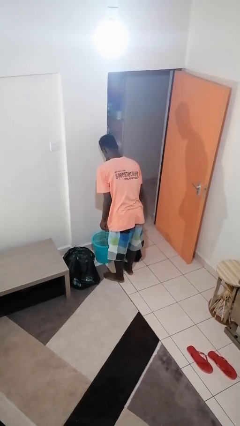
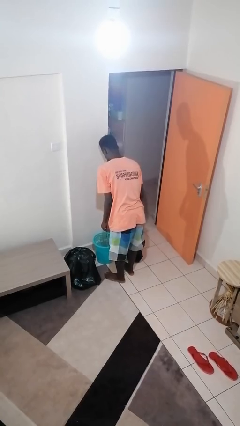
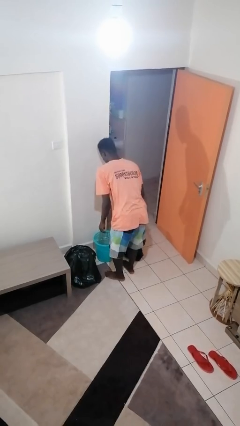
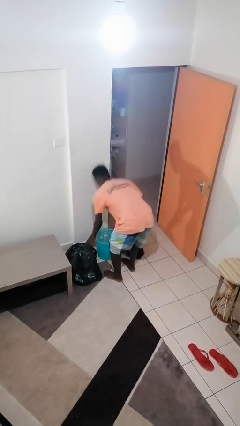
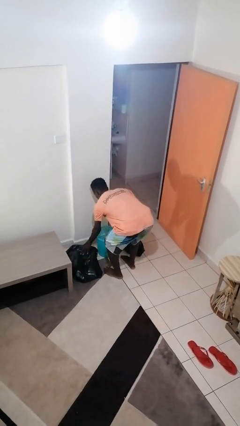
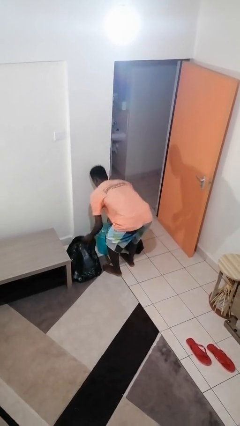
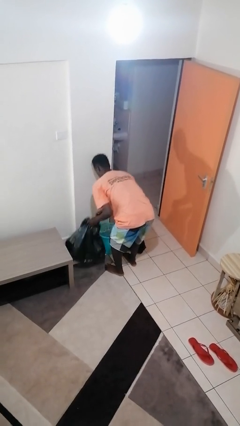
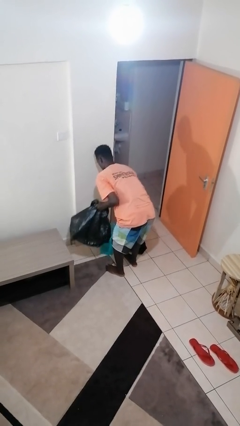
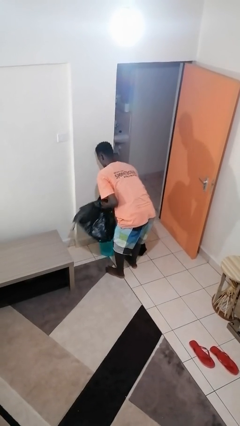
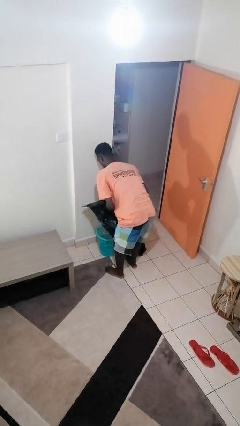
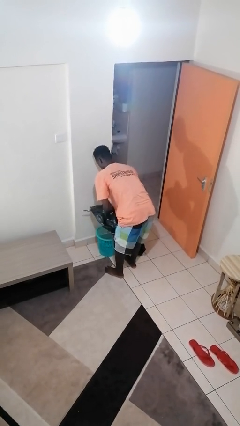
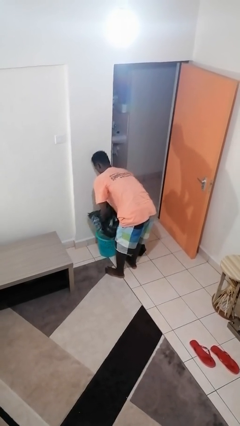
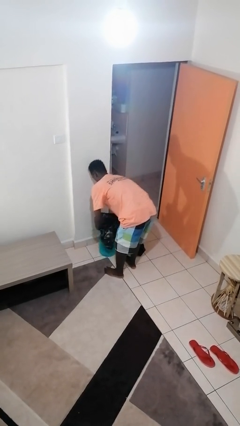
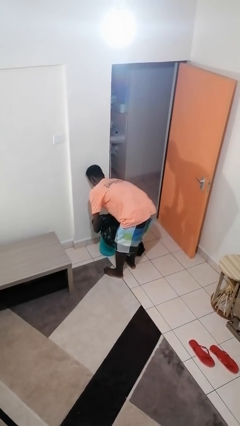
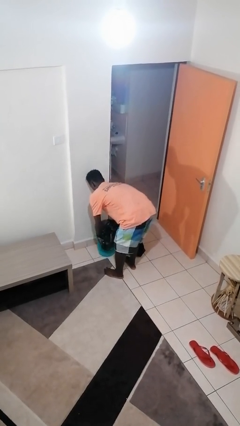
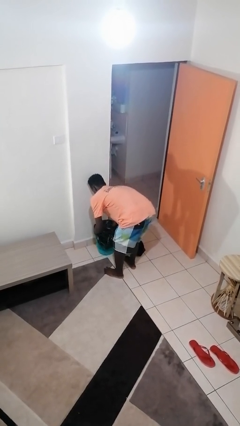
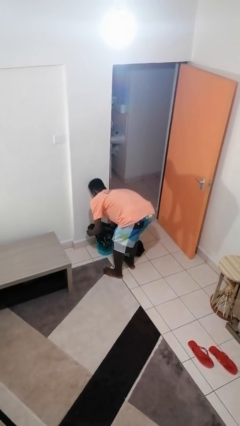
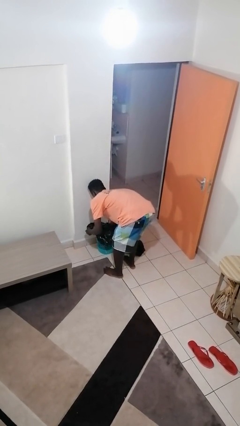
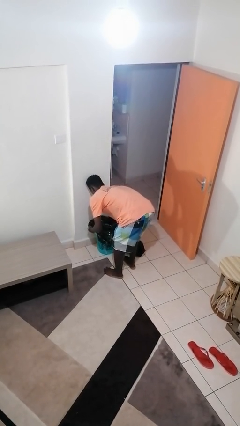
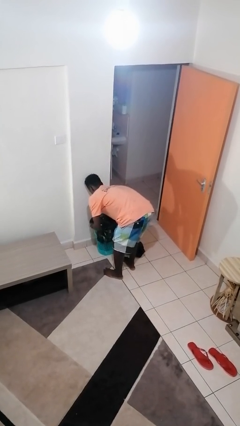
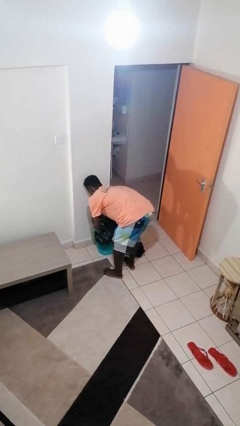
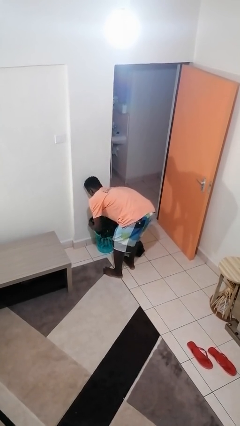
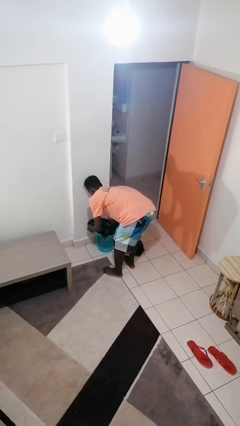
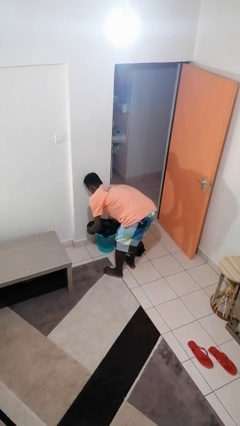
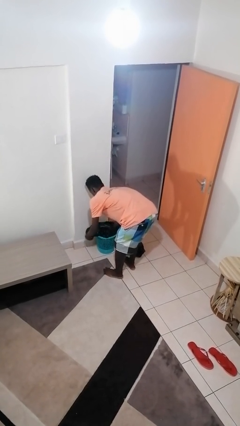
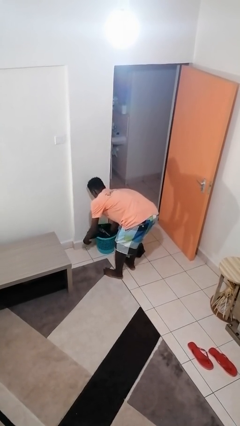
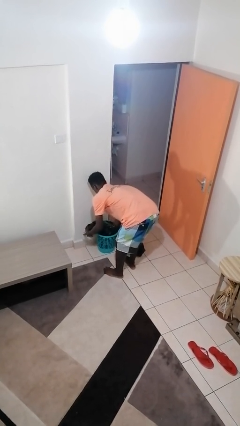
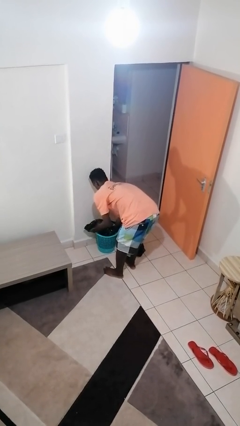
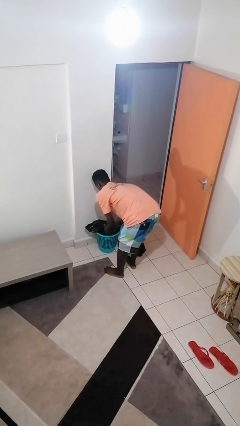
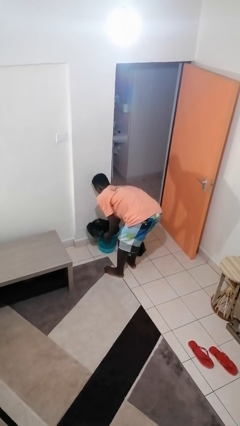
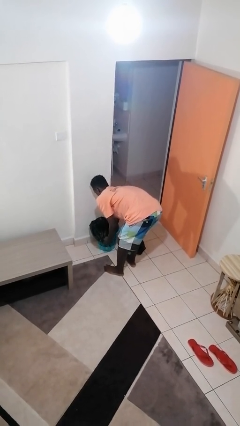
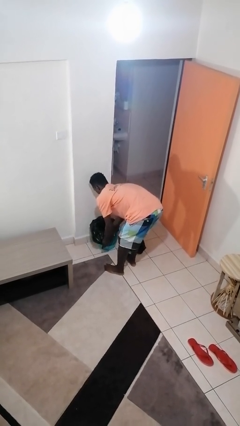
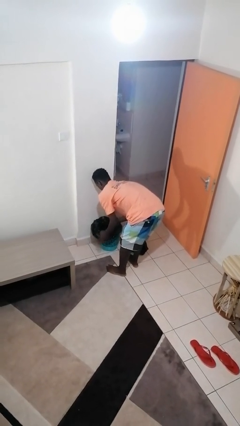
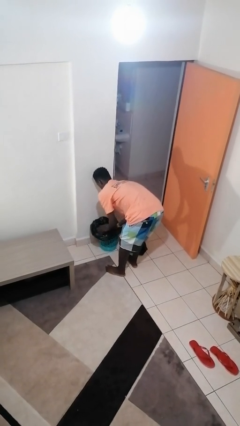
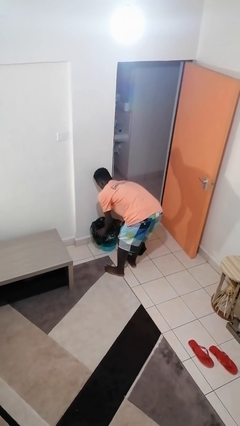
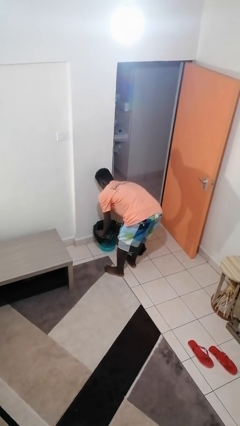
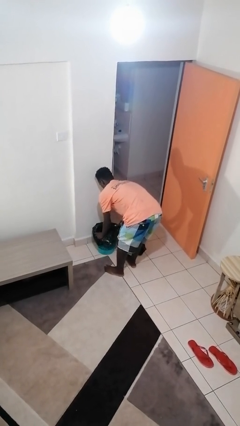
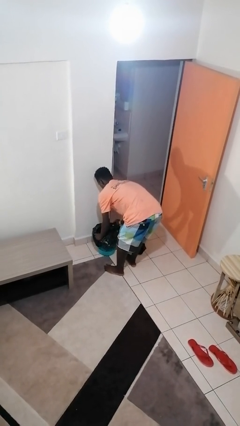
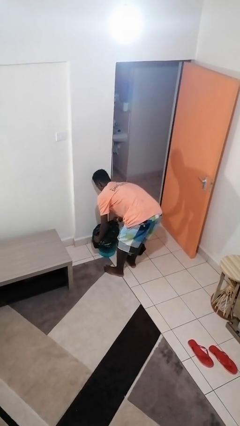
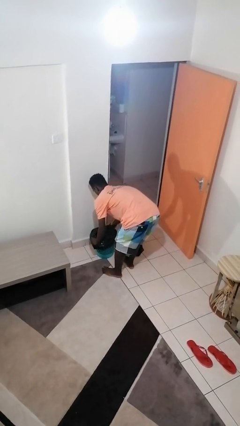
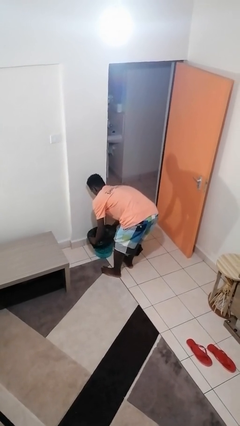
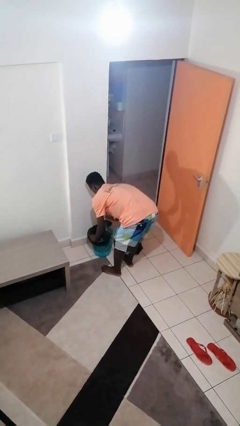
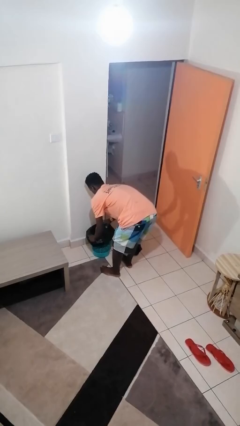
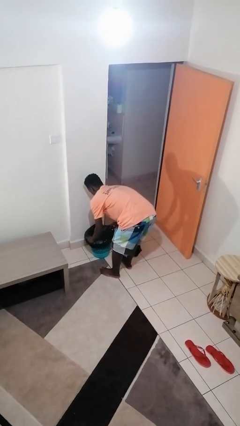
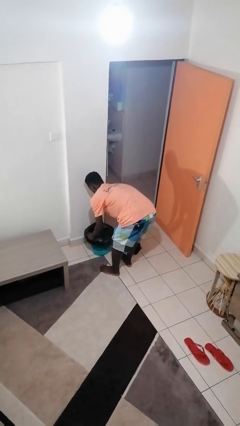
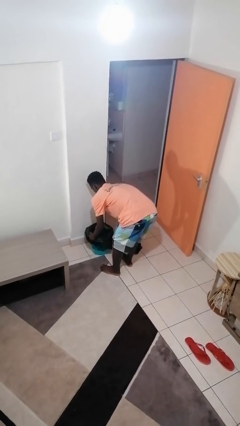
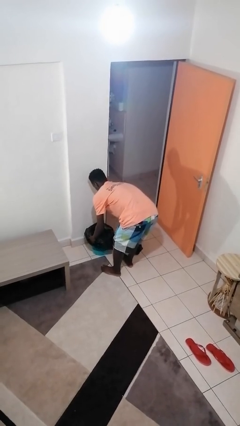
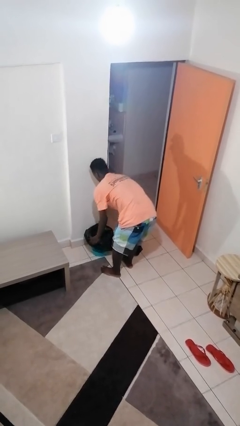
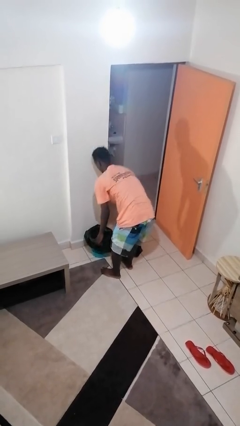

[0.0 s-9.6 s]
person inserts trashbag into trashcan

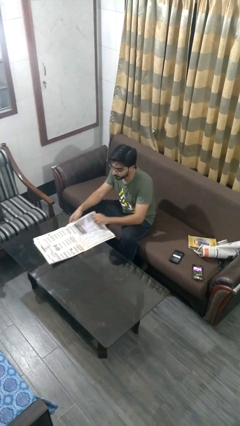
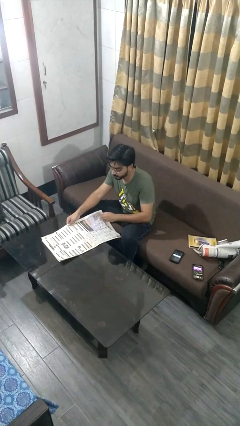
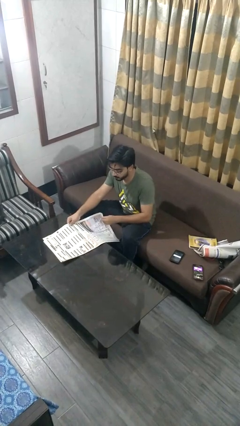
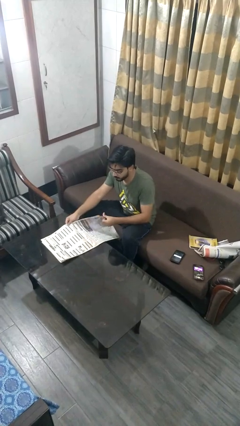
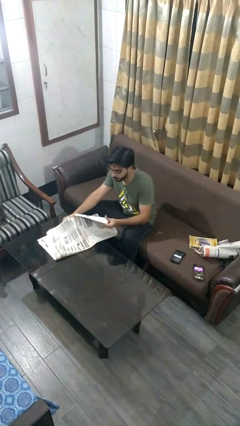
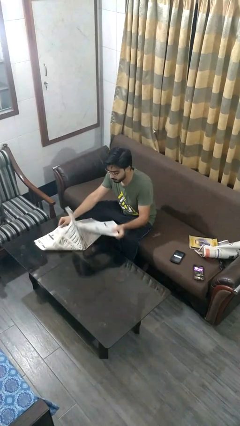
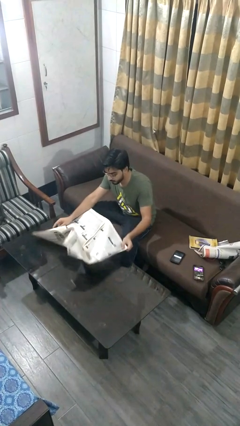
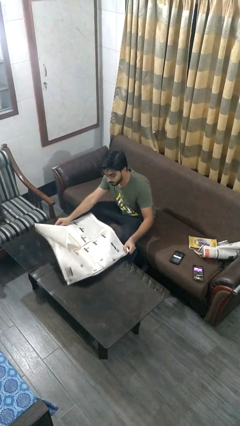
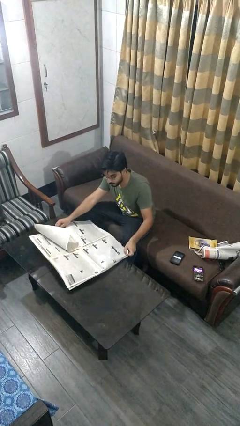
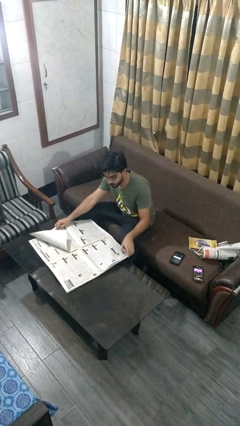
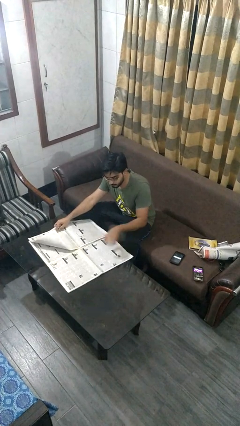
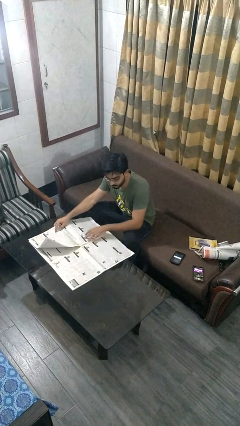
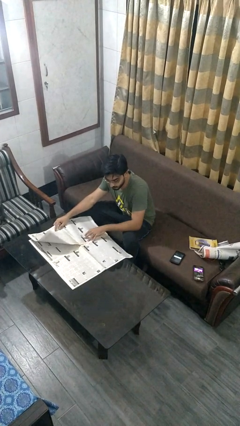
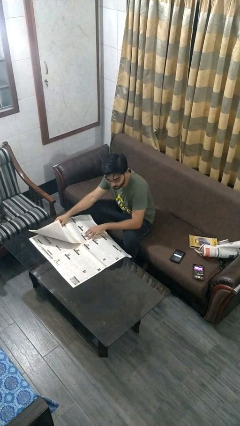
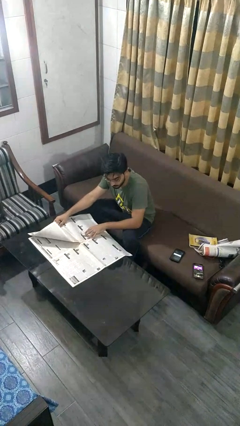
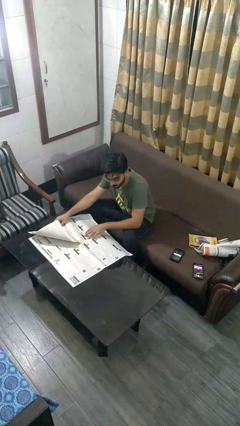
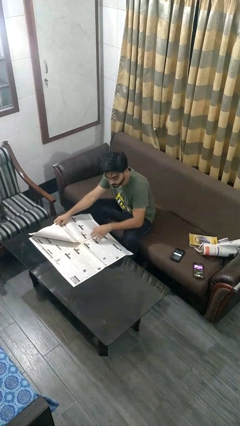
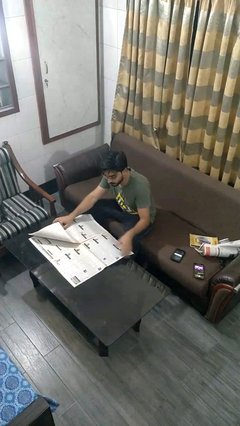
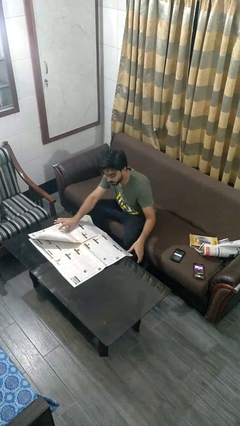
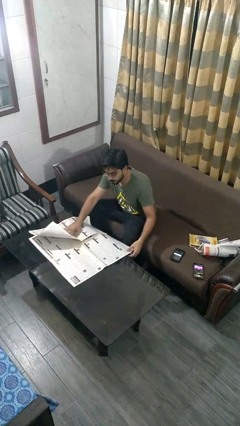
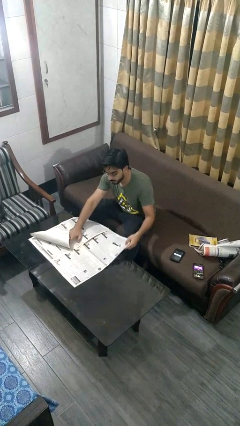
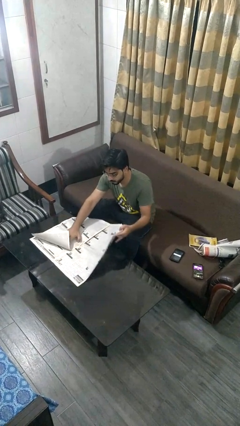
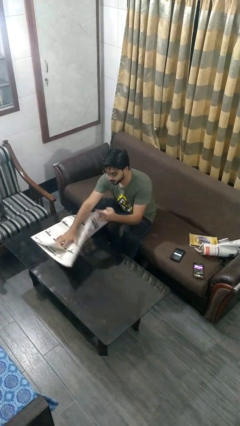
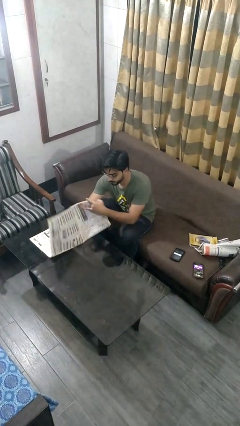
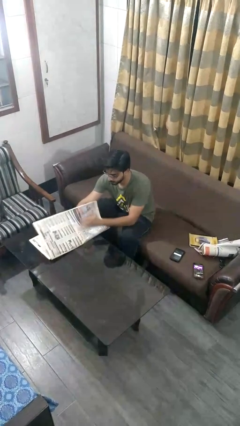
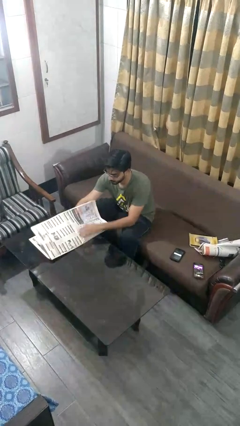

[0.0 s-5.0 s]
person reads newspaper

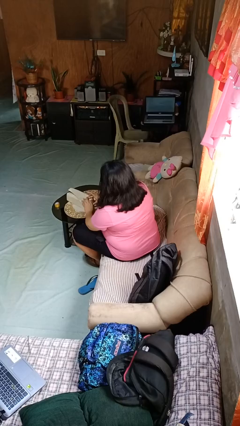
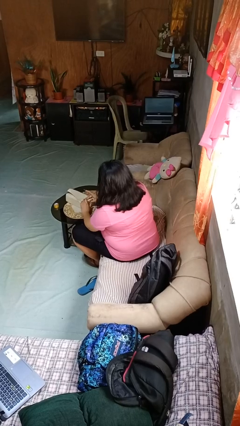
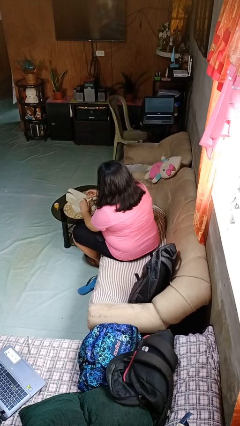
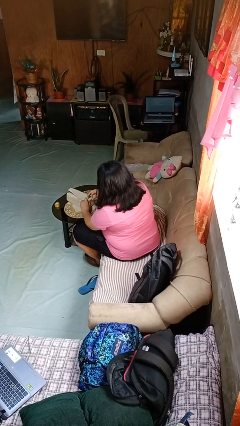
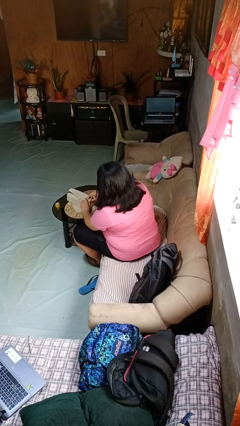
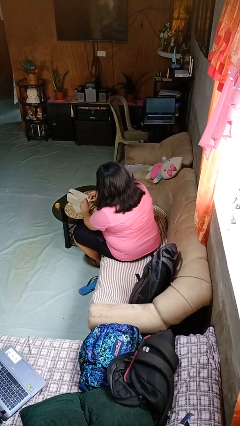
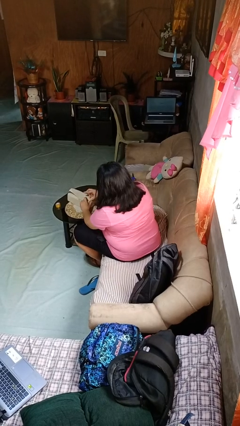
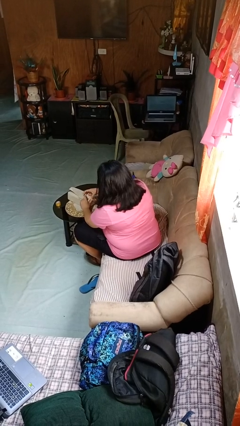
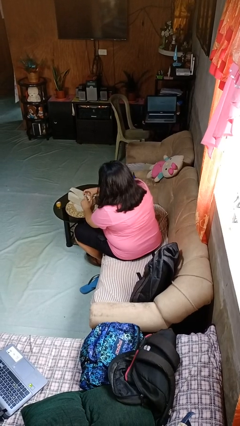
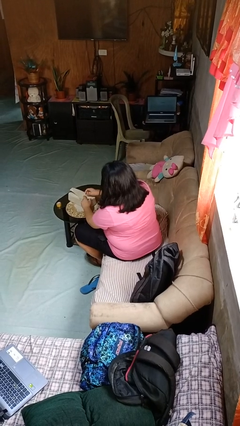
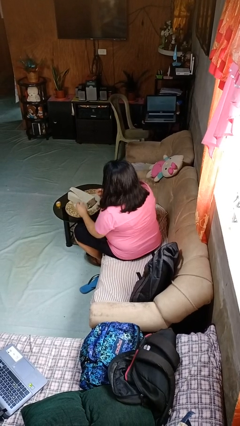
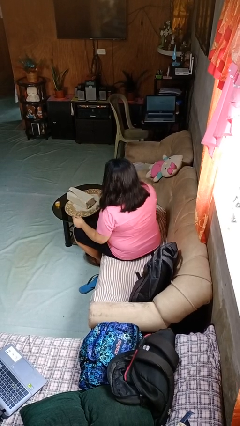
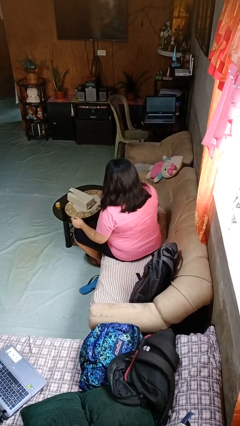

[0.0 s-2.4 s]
person wraps box

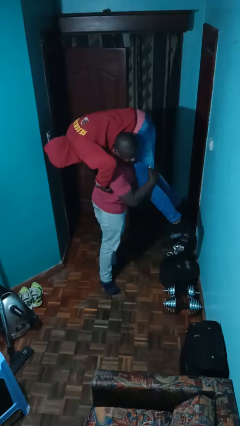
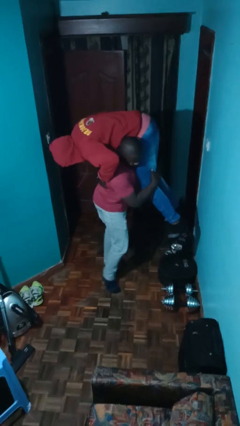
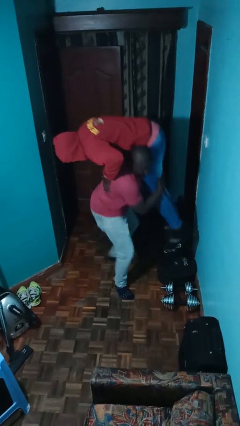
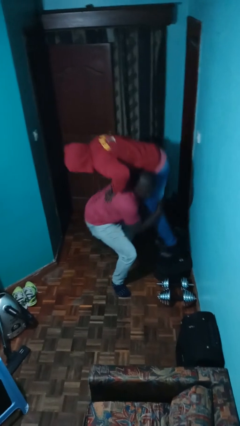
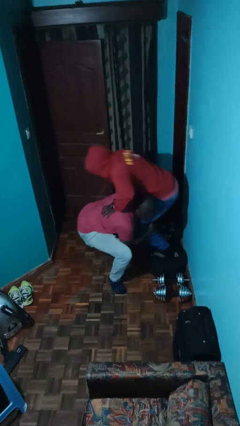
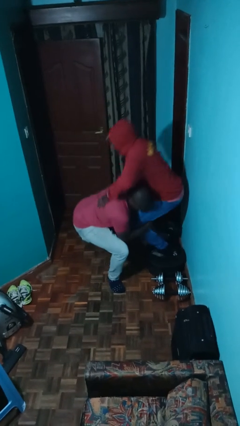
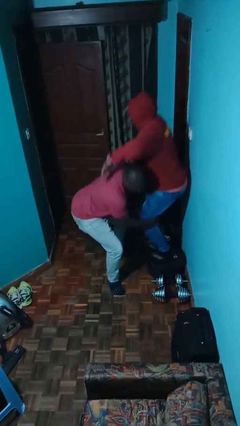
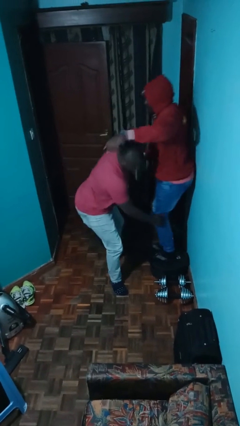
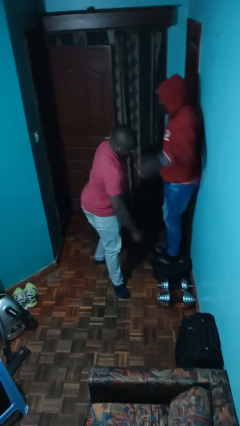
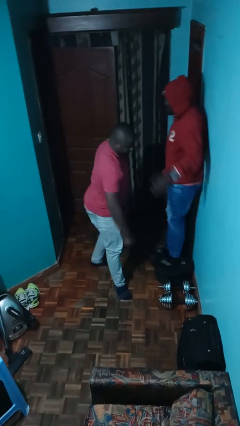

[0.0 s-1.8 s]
person puts down person
